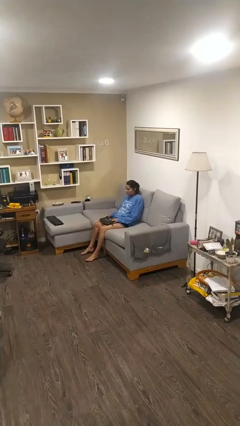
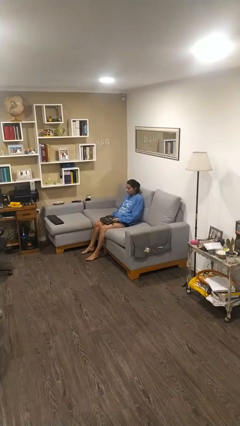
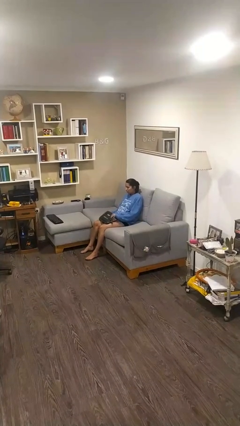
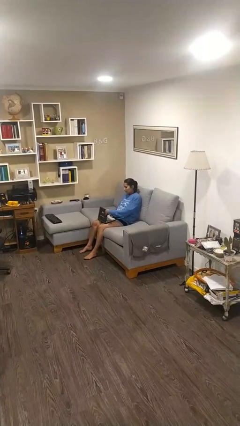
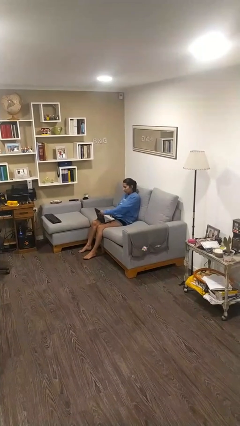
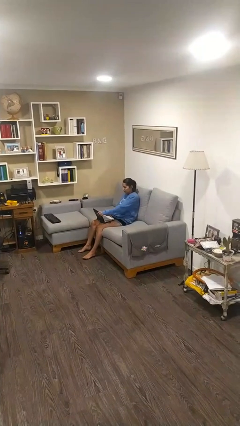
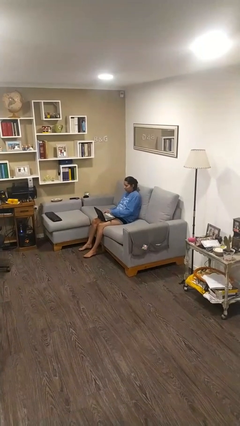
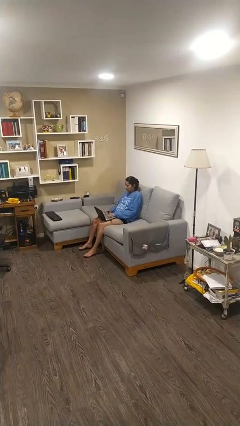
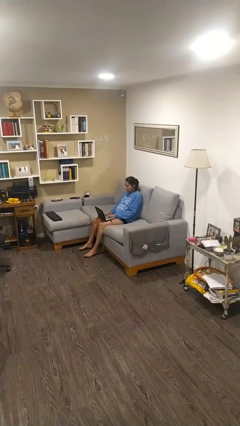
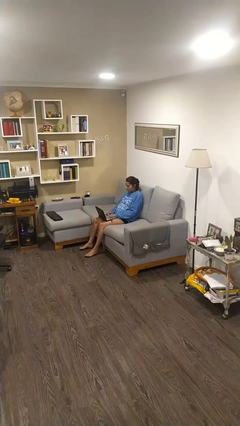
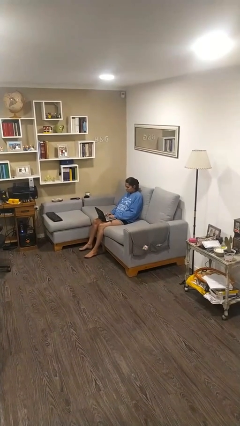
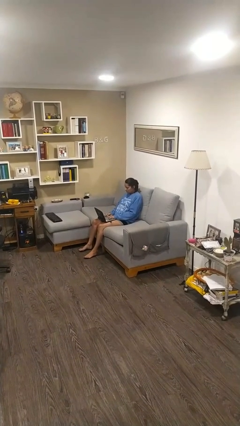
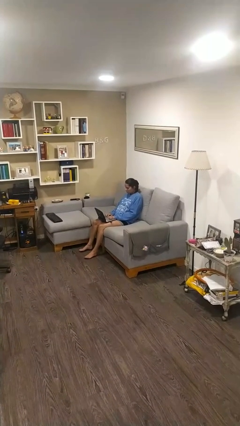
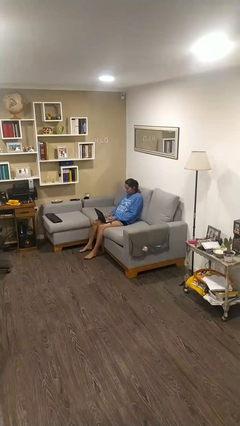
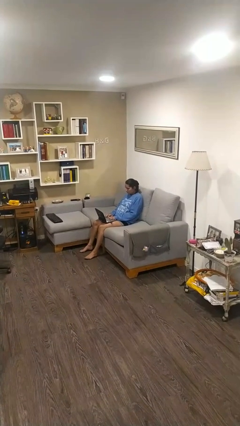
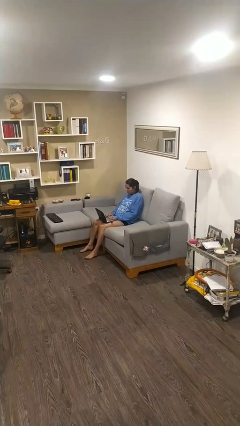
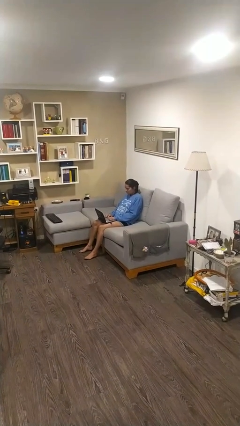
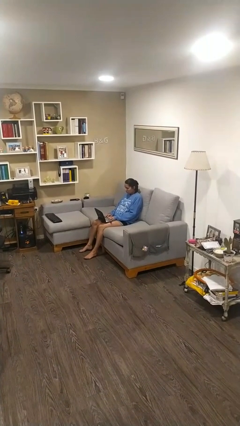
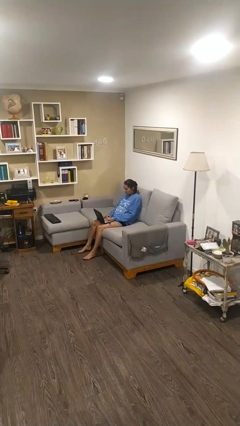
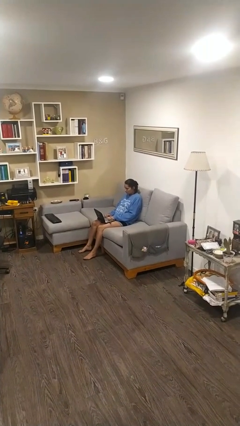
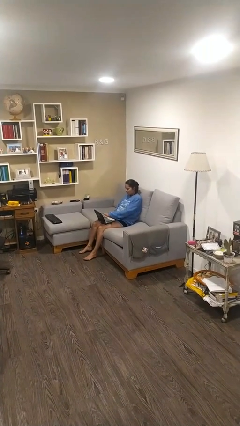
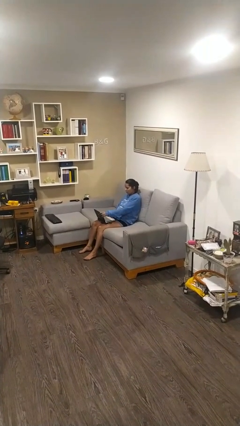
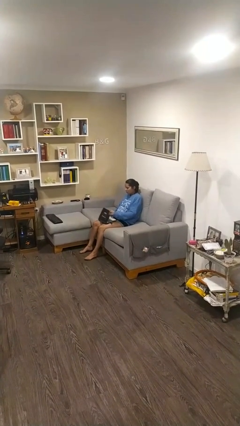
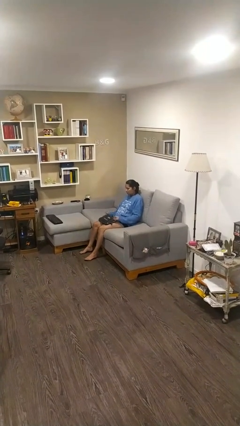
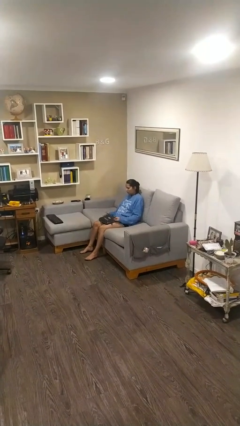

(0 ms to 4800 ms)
person interacts with laptop

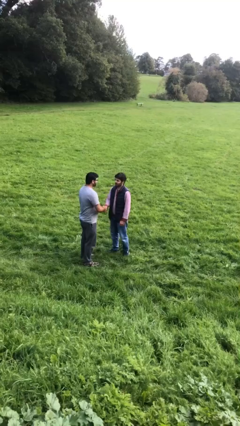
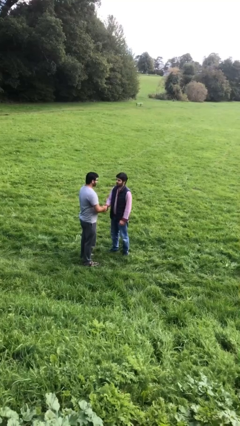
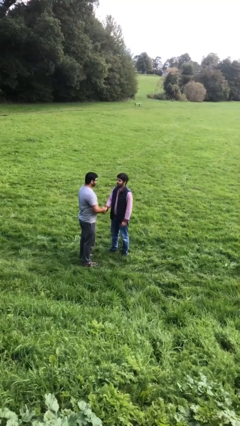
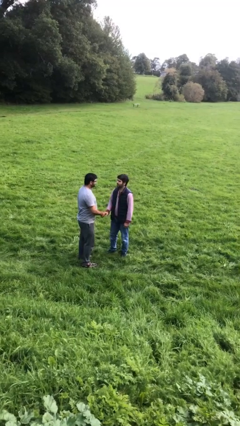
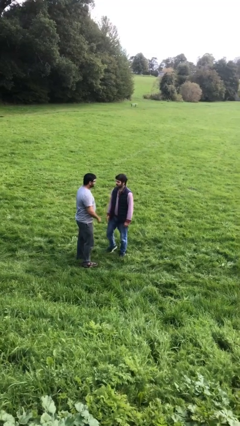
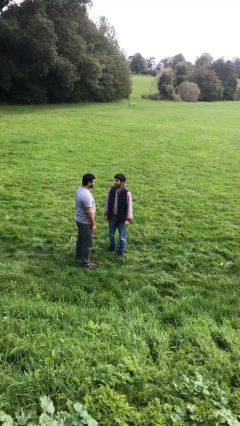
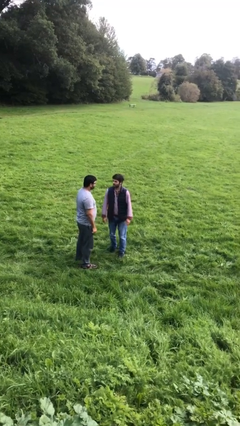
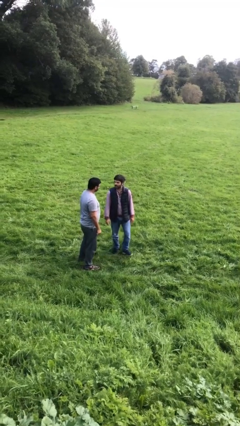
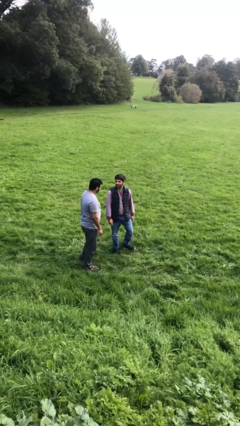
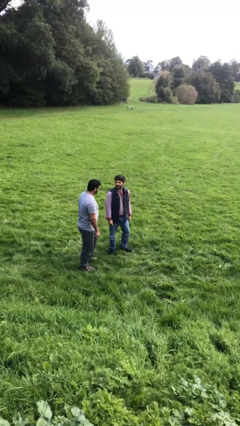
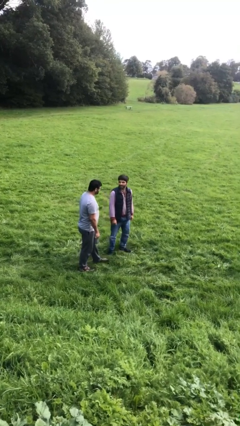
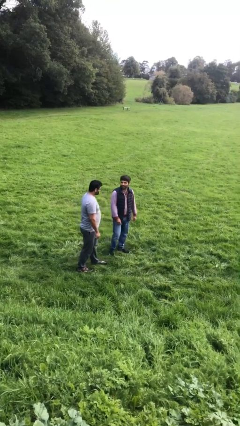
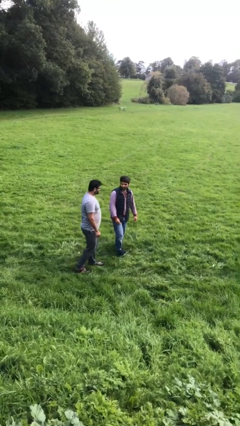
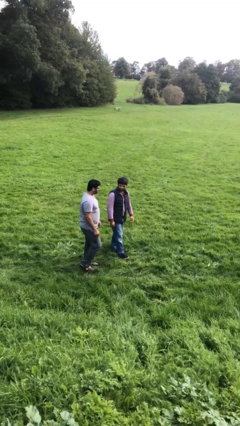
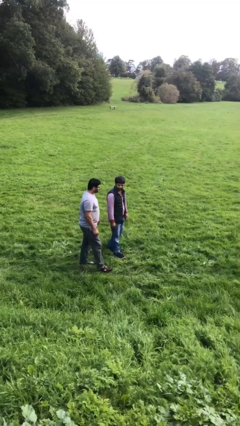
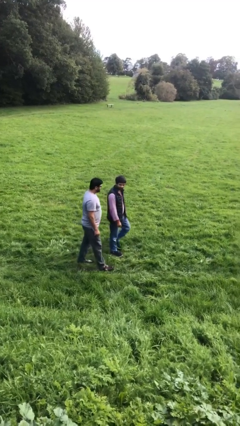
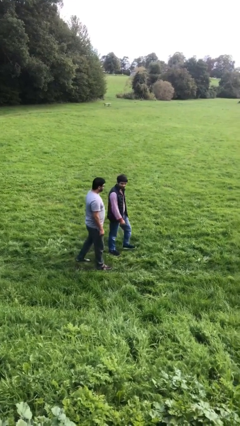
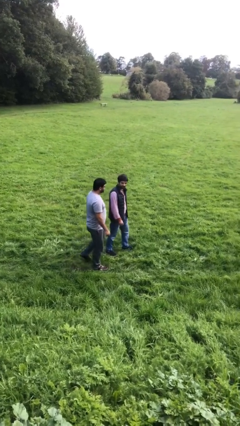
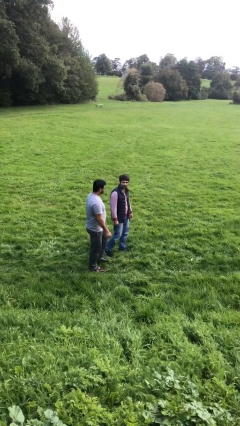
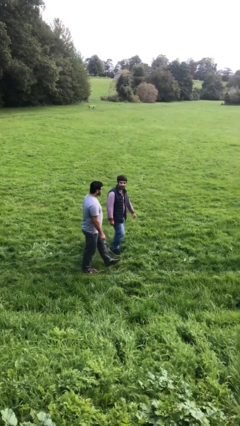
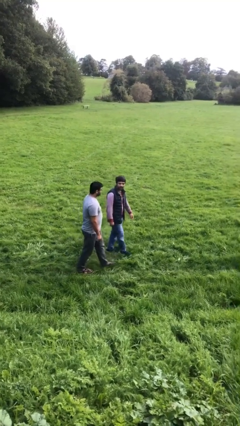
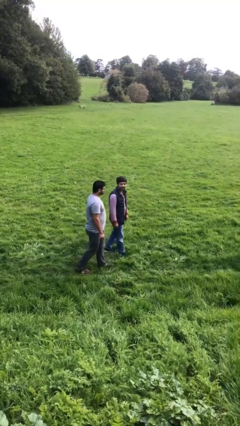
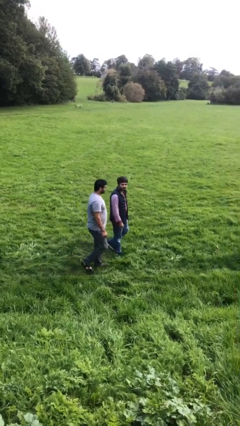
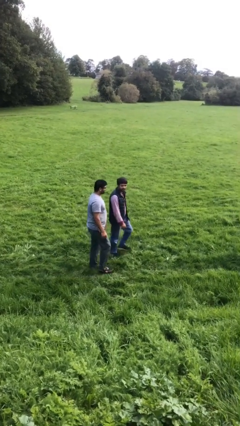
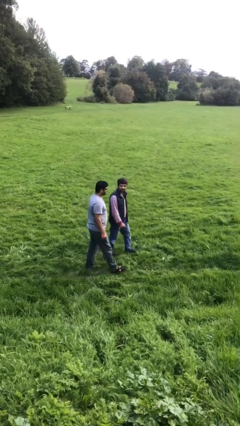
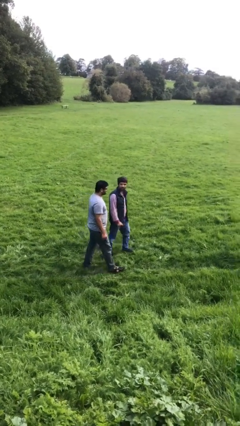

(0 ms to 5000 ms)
person talks to person

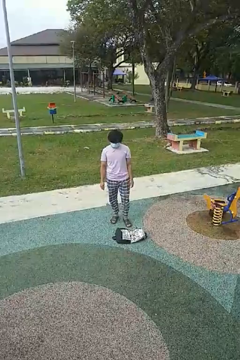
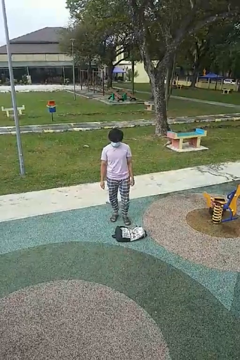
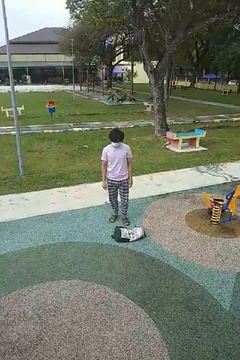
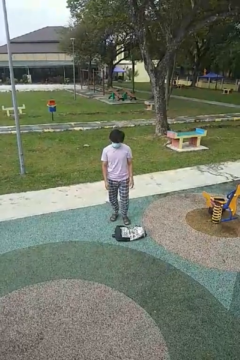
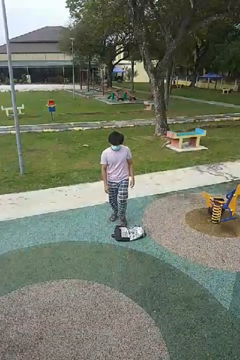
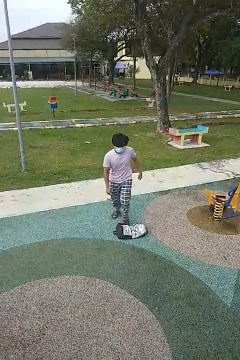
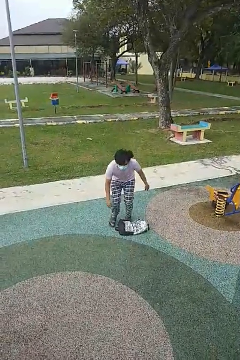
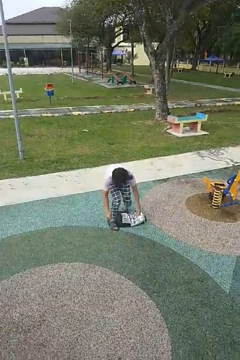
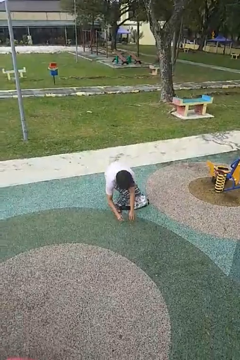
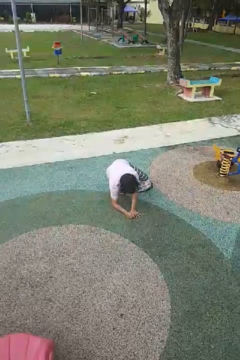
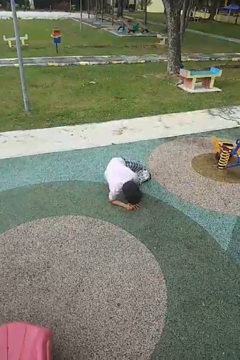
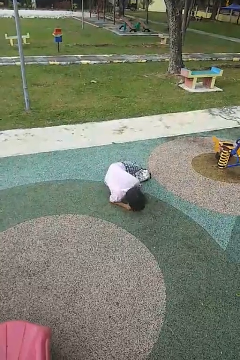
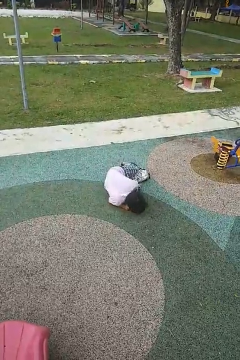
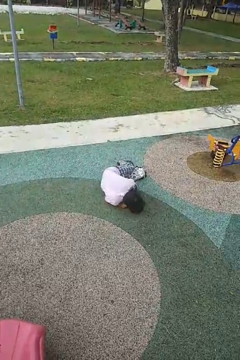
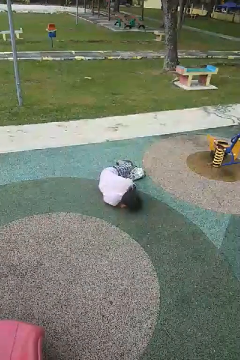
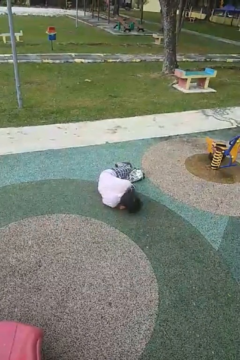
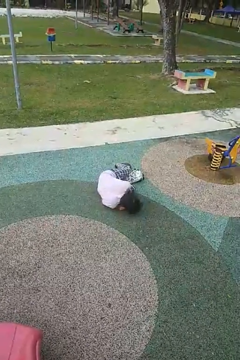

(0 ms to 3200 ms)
person trips on object on floor

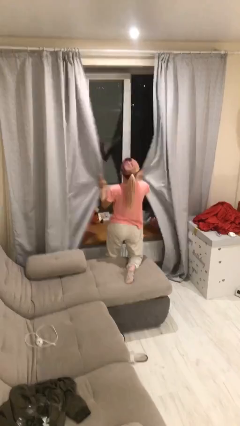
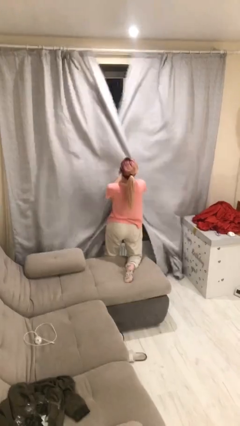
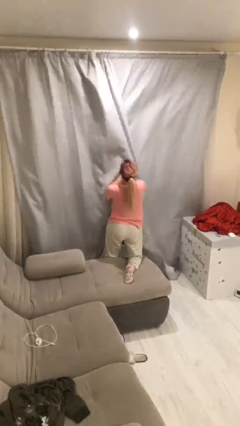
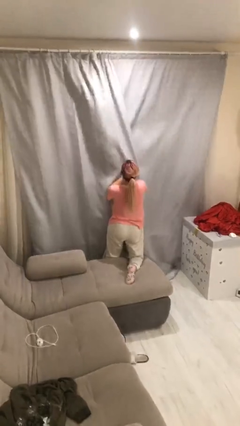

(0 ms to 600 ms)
person closes curtains

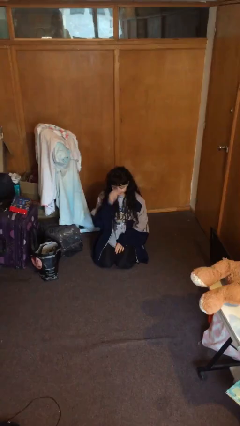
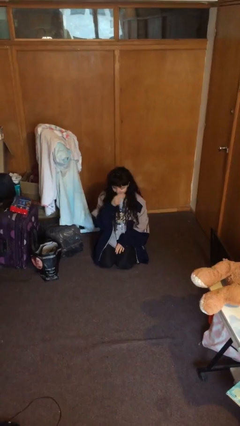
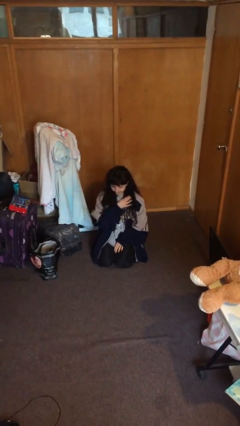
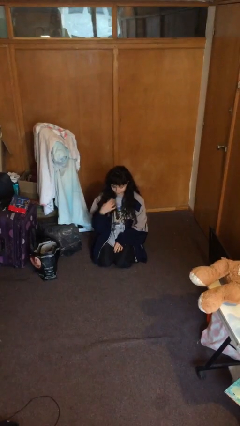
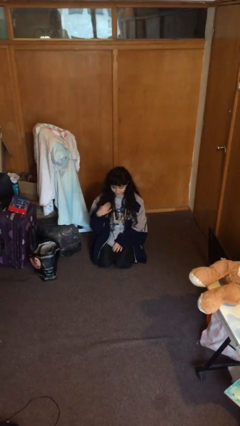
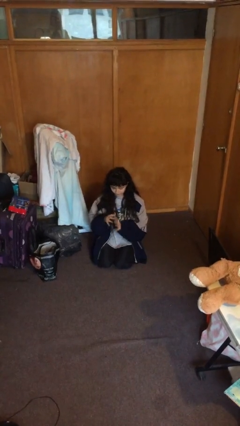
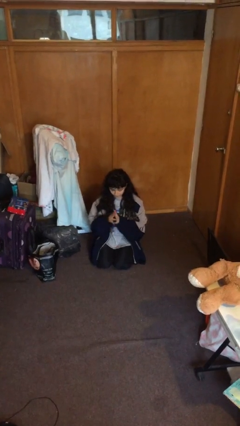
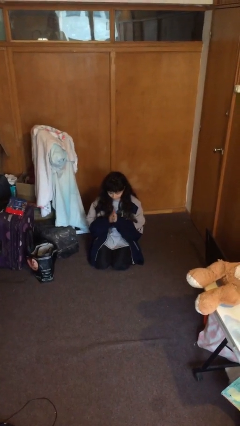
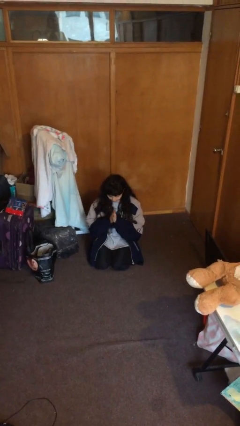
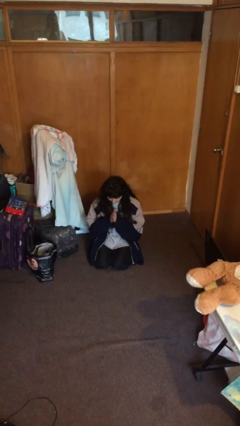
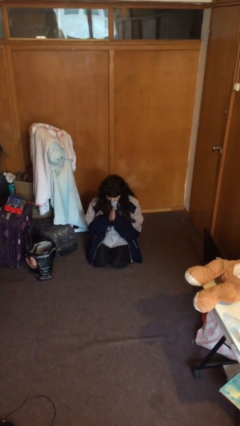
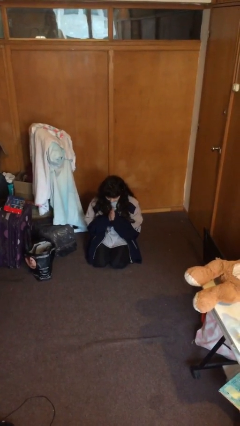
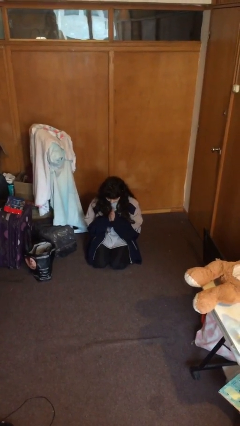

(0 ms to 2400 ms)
person prays

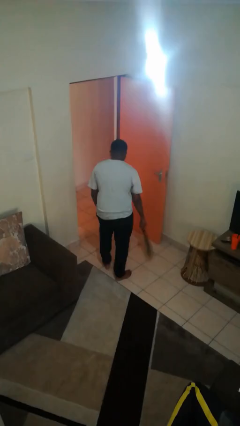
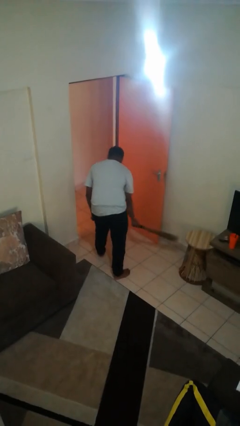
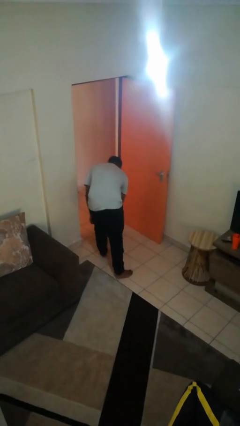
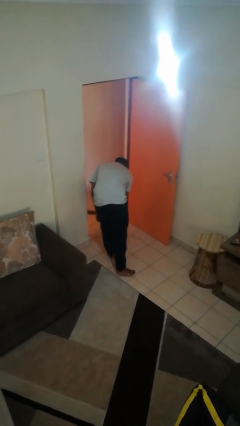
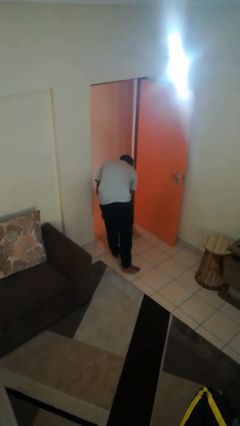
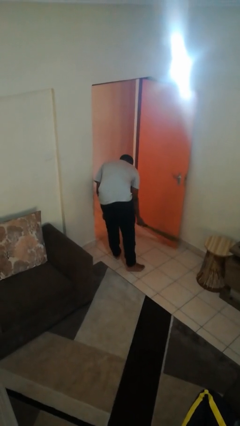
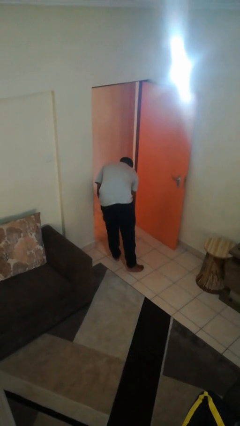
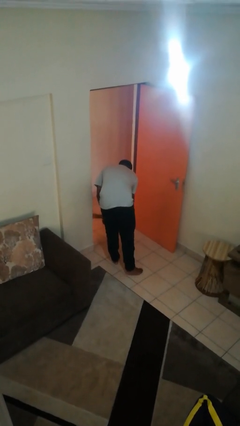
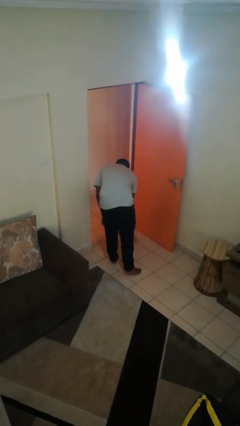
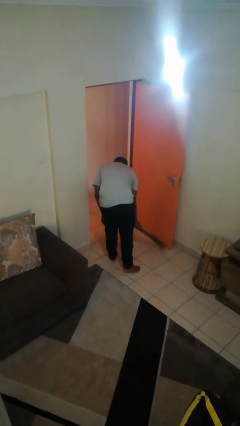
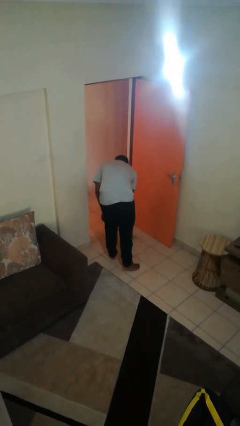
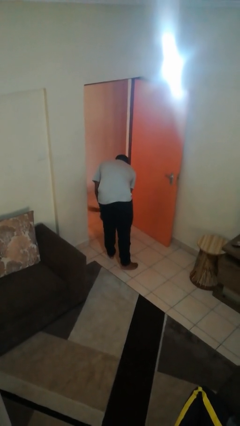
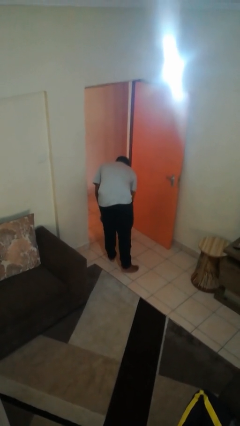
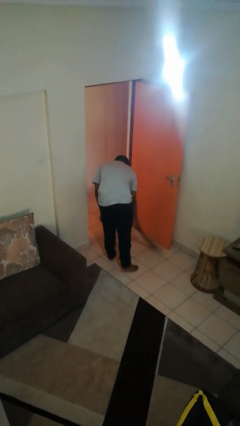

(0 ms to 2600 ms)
person sweeps floor
